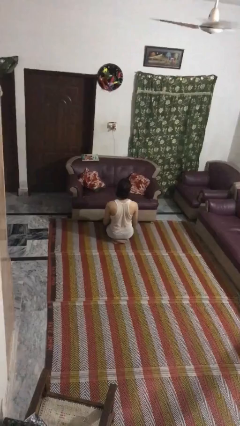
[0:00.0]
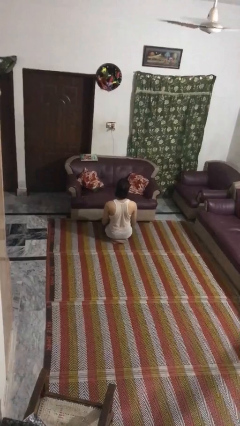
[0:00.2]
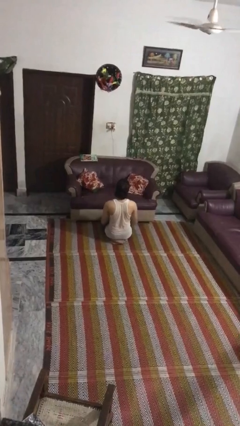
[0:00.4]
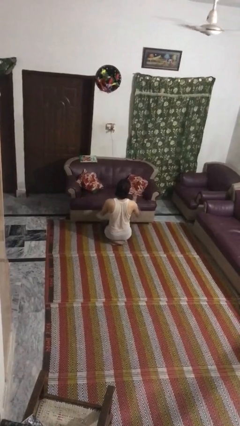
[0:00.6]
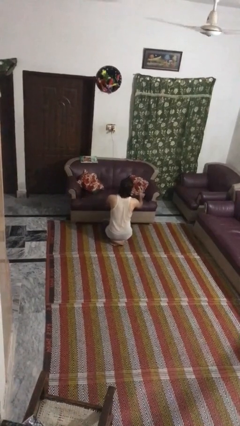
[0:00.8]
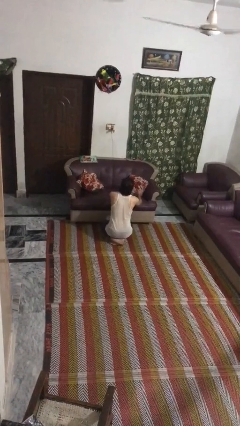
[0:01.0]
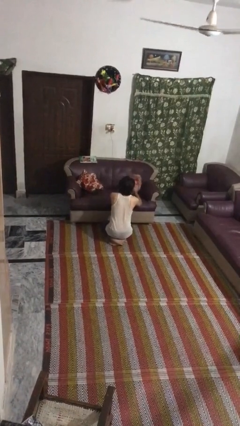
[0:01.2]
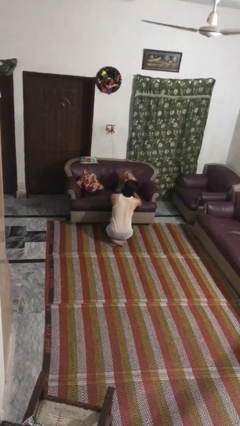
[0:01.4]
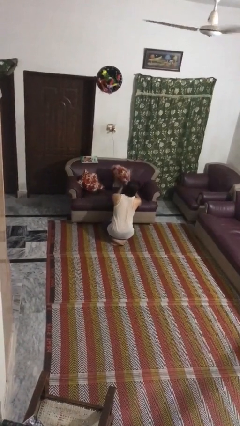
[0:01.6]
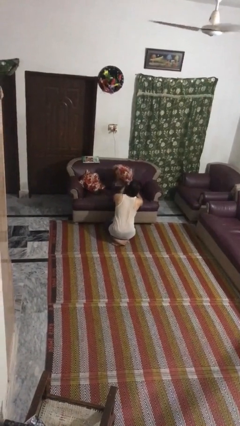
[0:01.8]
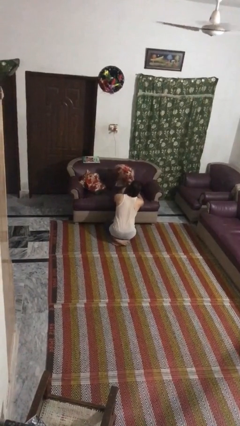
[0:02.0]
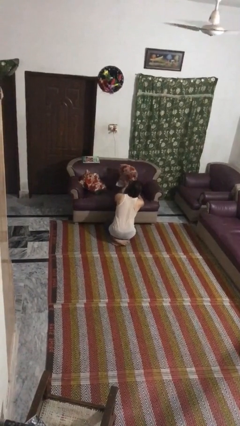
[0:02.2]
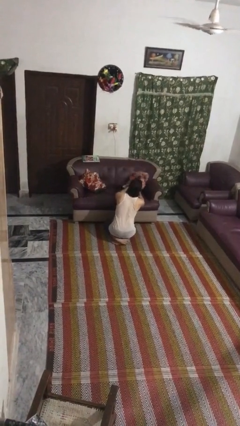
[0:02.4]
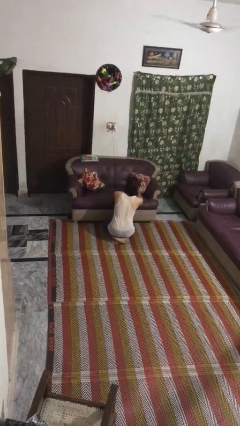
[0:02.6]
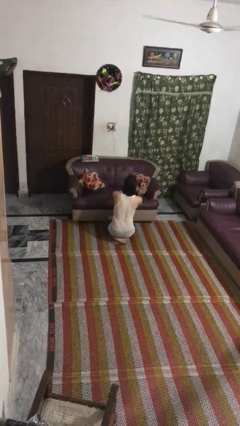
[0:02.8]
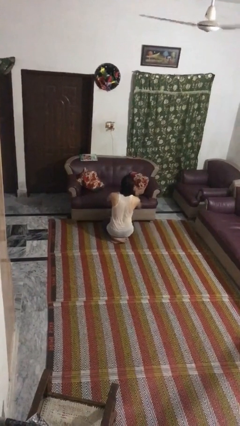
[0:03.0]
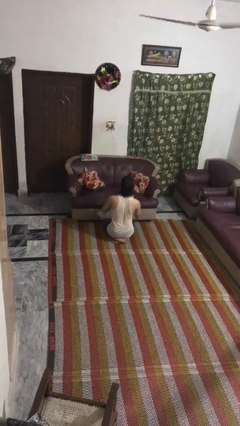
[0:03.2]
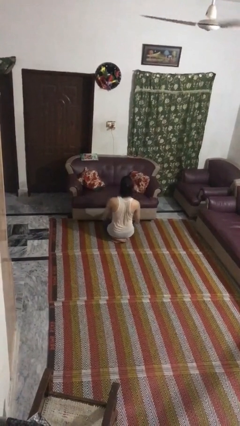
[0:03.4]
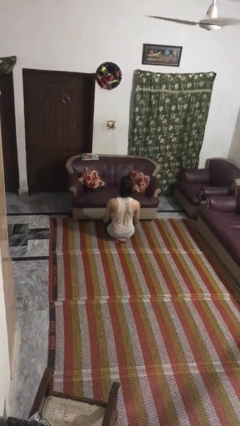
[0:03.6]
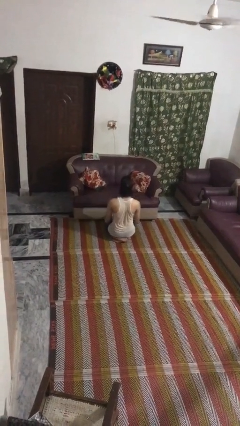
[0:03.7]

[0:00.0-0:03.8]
person searches in couch

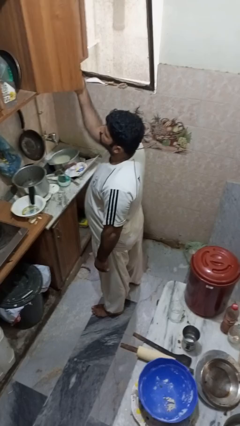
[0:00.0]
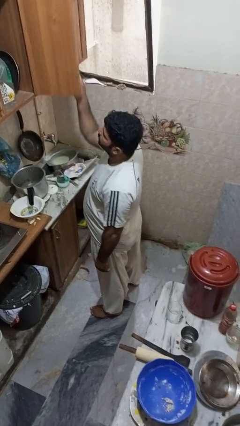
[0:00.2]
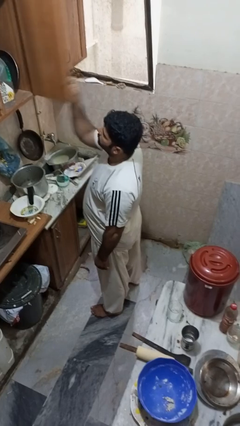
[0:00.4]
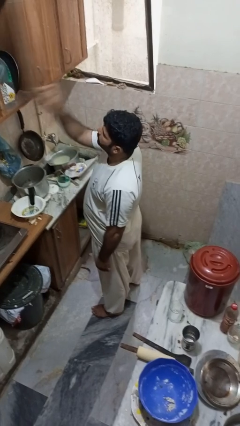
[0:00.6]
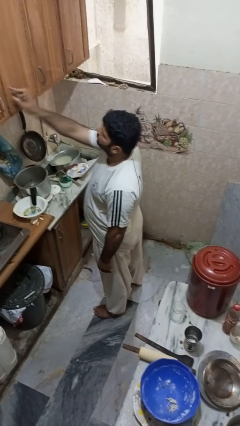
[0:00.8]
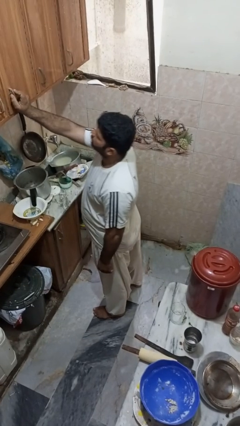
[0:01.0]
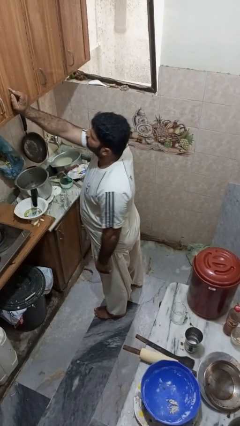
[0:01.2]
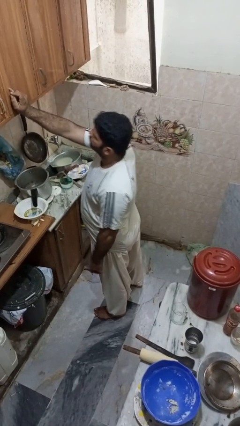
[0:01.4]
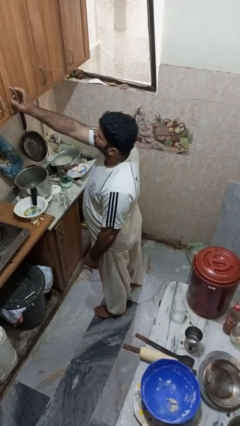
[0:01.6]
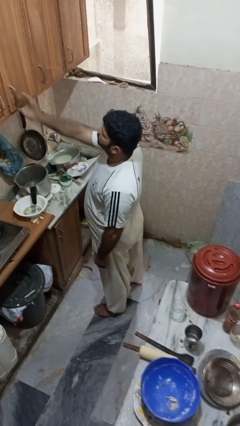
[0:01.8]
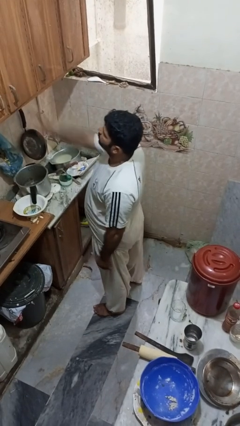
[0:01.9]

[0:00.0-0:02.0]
person closes cabinet

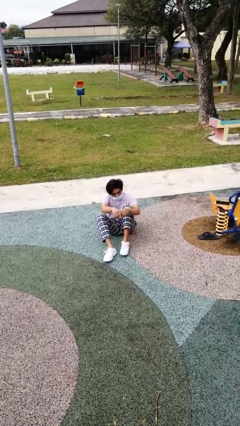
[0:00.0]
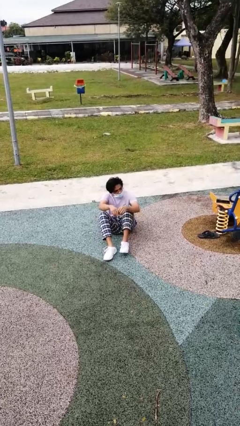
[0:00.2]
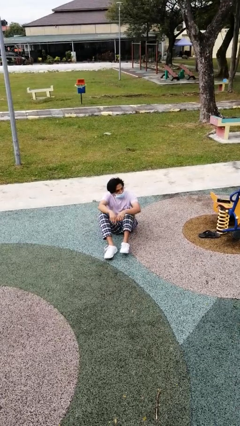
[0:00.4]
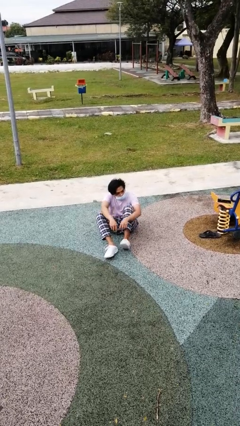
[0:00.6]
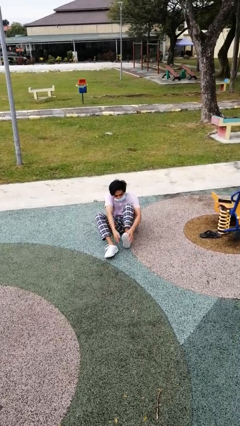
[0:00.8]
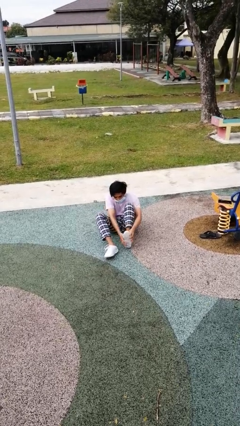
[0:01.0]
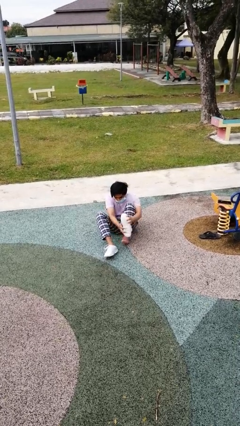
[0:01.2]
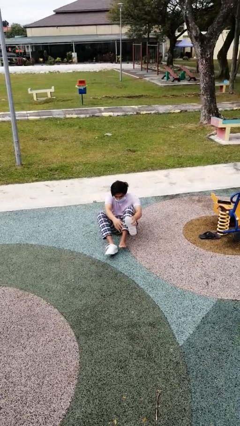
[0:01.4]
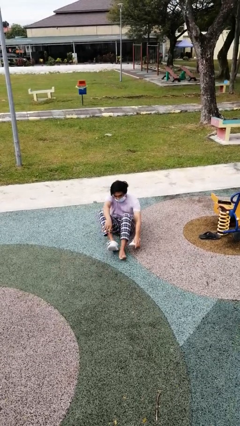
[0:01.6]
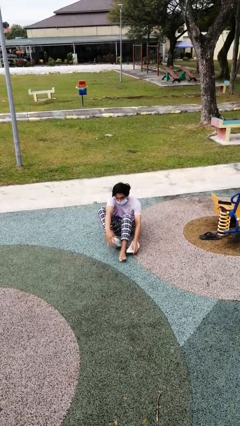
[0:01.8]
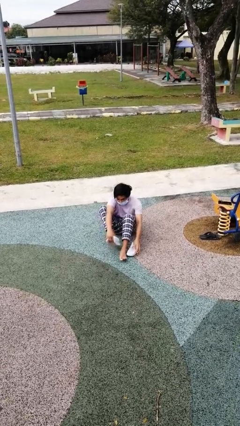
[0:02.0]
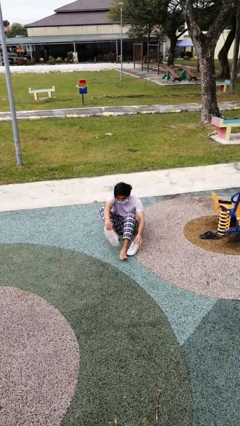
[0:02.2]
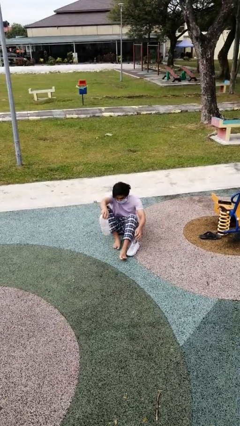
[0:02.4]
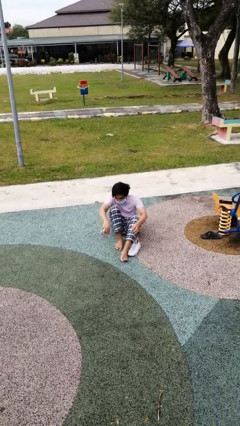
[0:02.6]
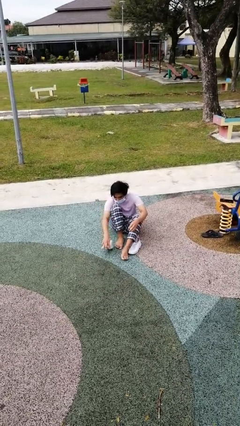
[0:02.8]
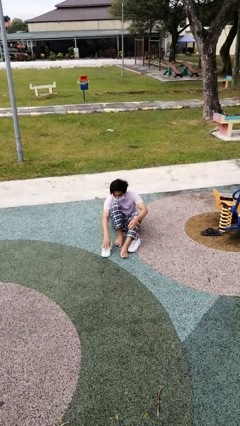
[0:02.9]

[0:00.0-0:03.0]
person takes off shoes

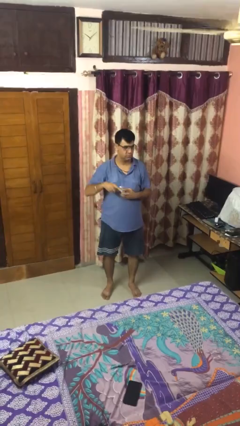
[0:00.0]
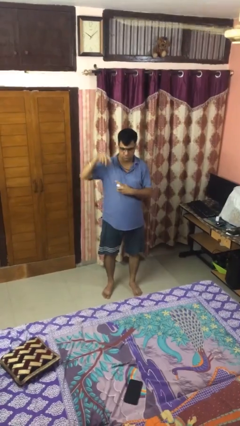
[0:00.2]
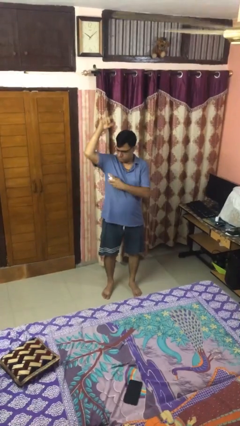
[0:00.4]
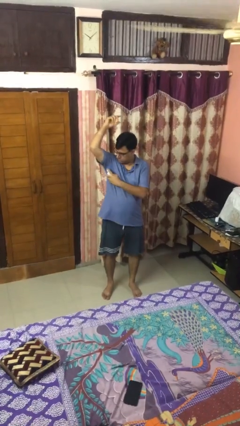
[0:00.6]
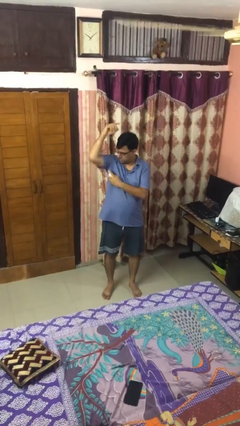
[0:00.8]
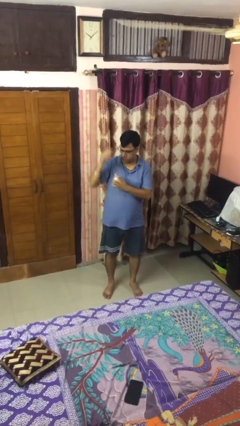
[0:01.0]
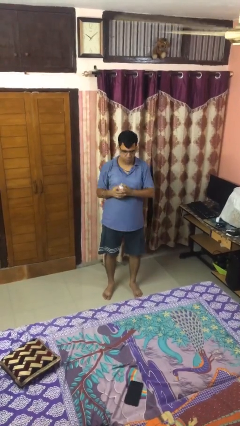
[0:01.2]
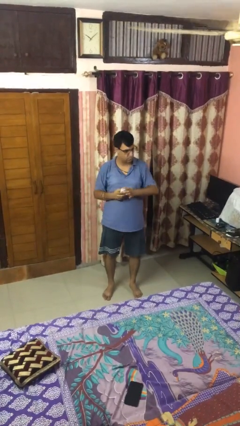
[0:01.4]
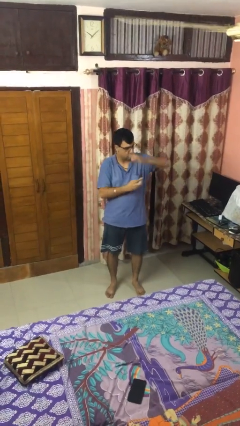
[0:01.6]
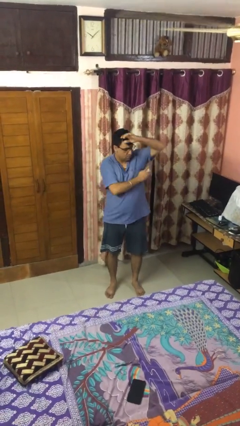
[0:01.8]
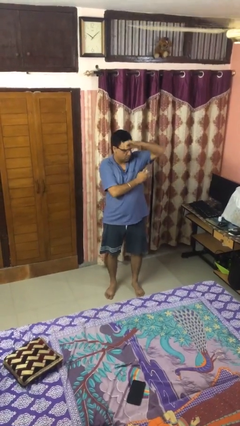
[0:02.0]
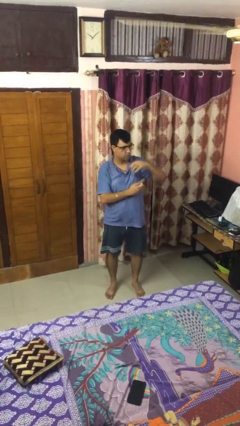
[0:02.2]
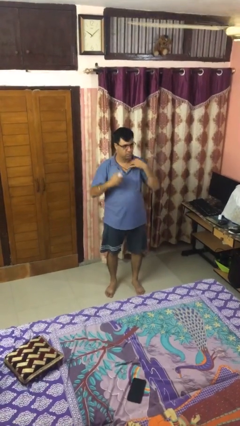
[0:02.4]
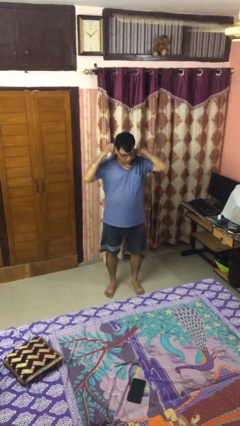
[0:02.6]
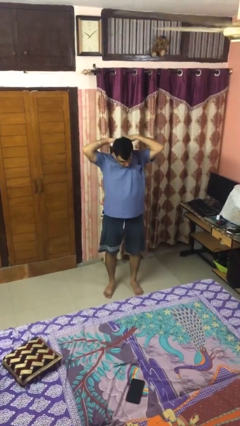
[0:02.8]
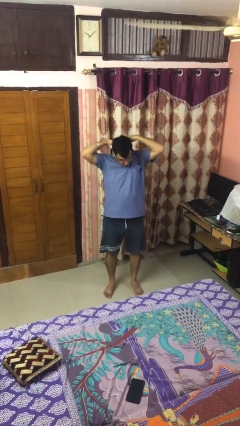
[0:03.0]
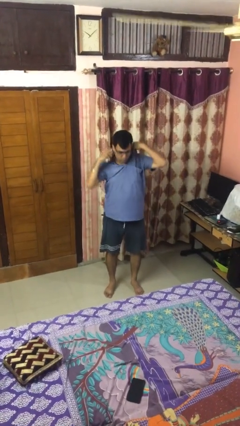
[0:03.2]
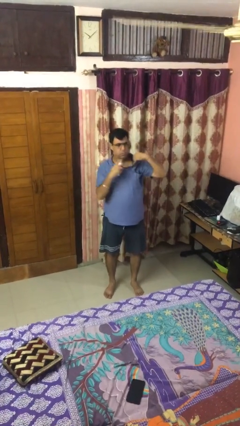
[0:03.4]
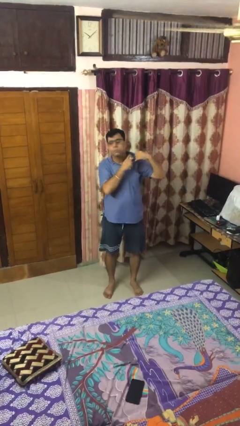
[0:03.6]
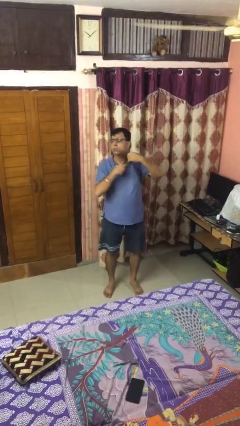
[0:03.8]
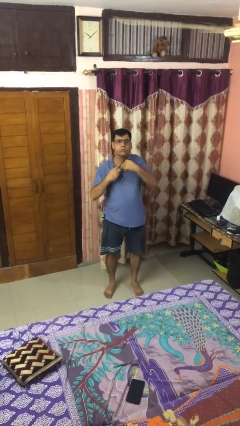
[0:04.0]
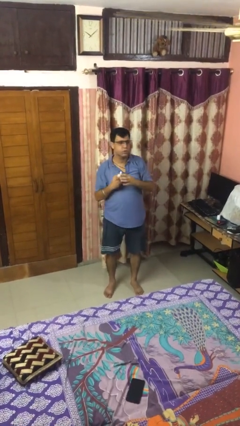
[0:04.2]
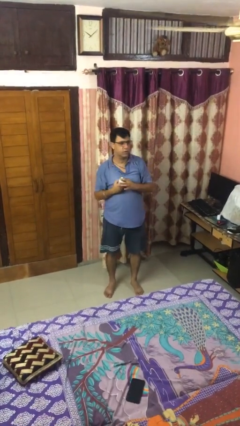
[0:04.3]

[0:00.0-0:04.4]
person applies deodorant

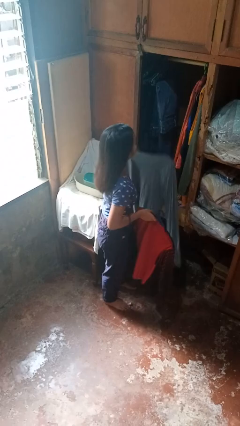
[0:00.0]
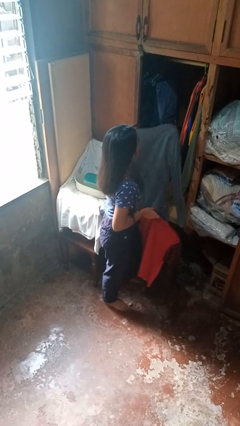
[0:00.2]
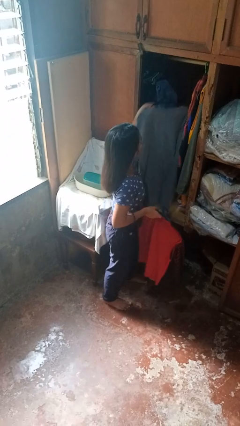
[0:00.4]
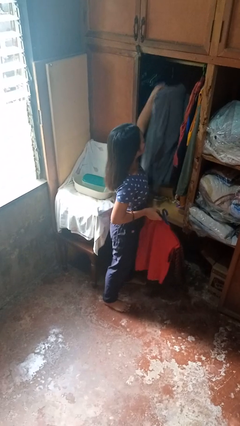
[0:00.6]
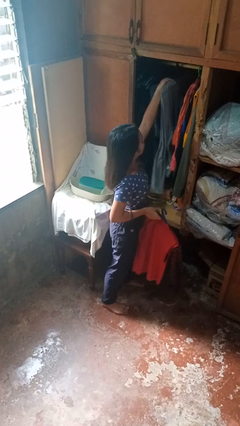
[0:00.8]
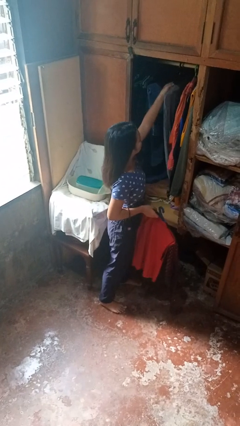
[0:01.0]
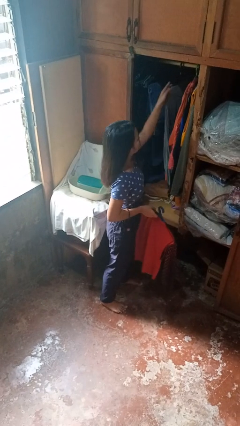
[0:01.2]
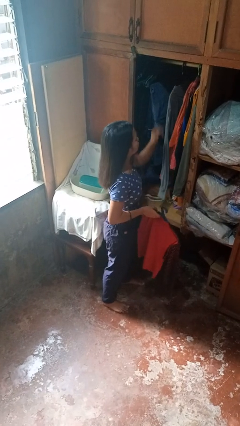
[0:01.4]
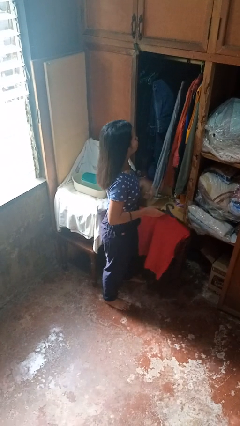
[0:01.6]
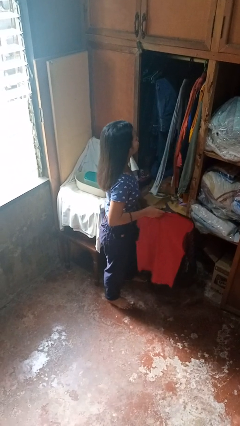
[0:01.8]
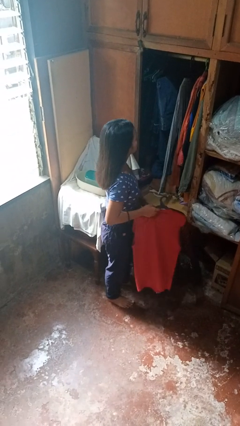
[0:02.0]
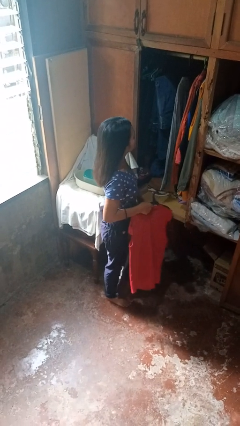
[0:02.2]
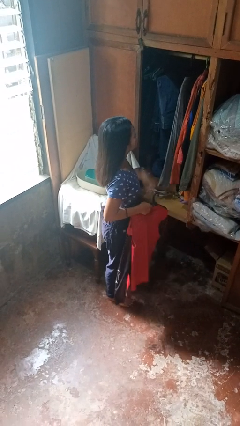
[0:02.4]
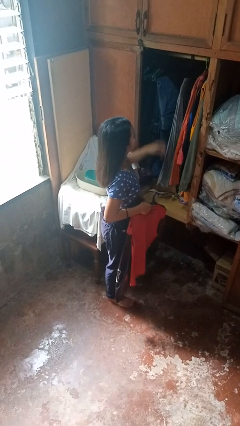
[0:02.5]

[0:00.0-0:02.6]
person puts clothes into closet

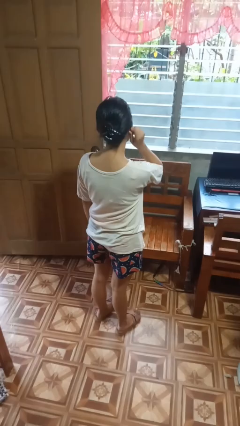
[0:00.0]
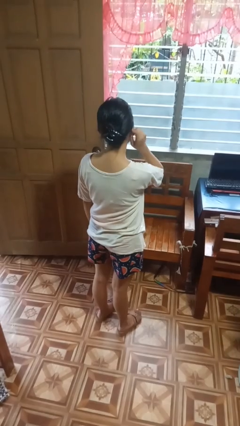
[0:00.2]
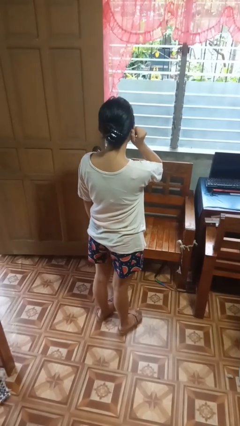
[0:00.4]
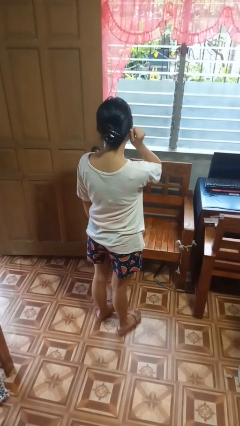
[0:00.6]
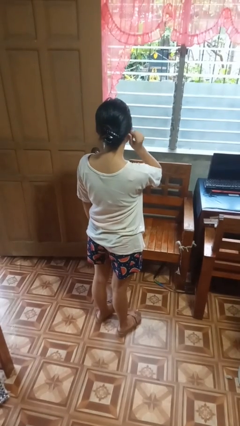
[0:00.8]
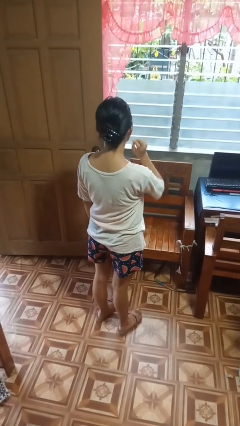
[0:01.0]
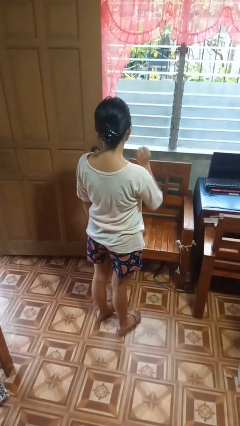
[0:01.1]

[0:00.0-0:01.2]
person touches earlobe

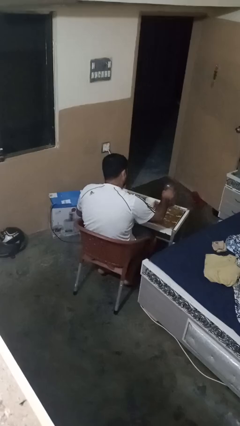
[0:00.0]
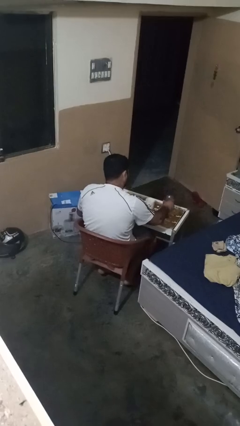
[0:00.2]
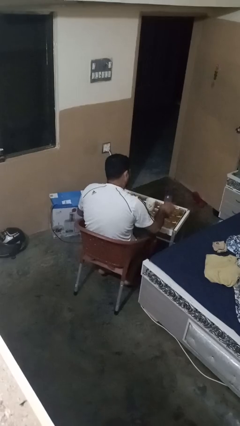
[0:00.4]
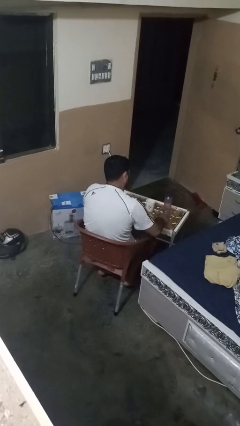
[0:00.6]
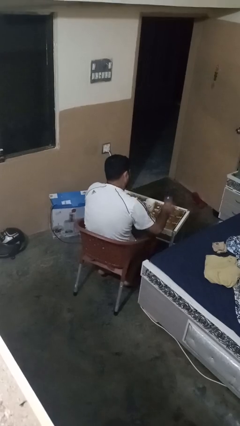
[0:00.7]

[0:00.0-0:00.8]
person screws lid to bottle
